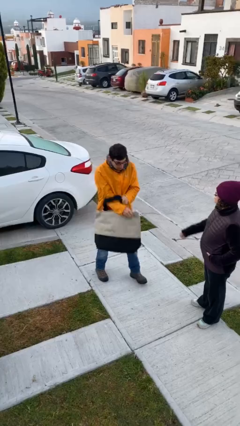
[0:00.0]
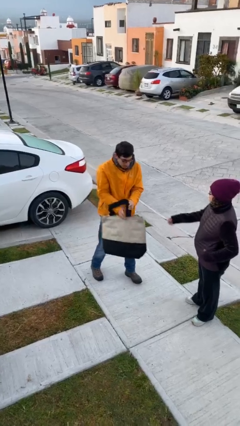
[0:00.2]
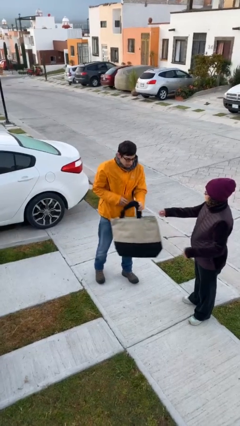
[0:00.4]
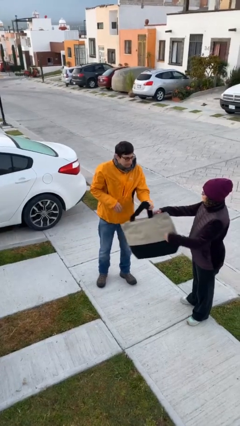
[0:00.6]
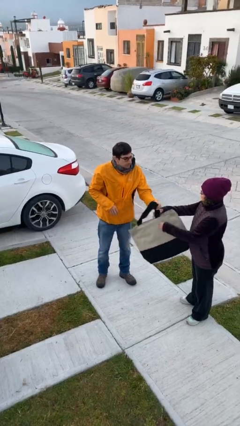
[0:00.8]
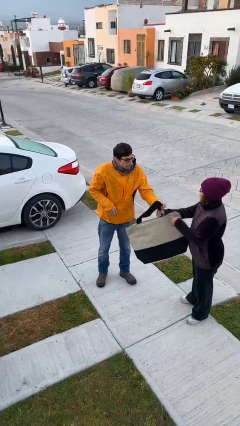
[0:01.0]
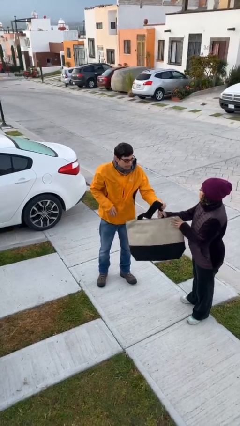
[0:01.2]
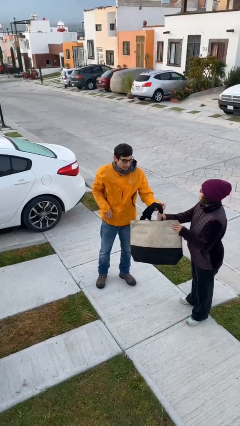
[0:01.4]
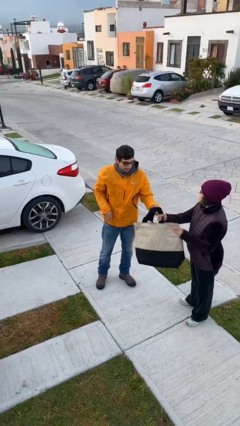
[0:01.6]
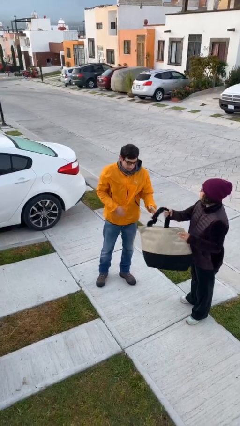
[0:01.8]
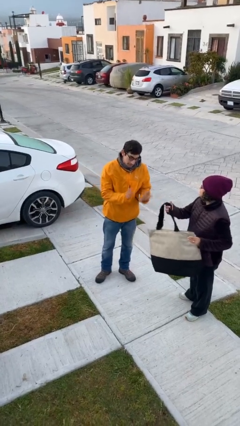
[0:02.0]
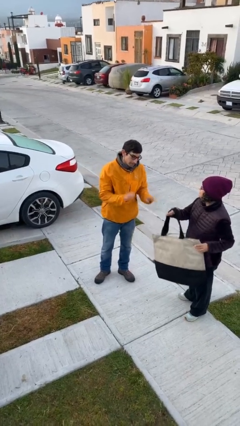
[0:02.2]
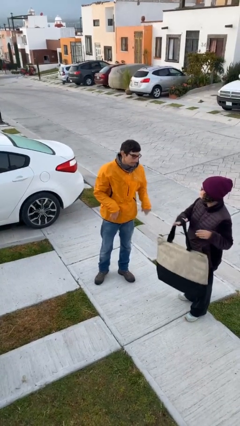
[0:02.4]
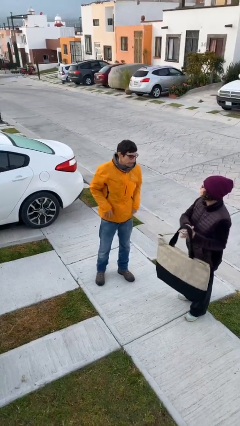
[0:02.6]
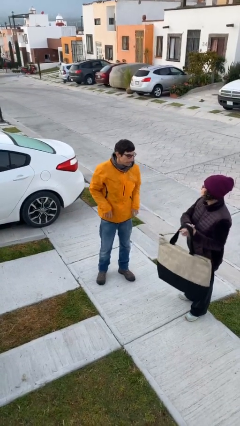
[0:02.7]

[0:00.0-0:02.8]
person transfers object to person

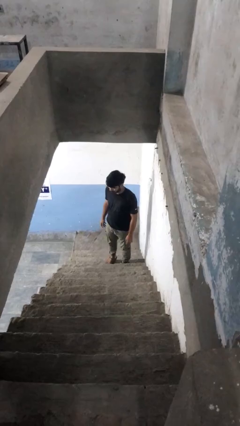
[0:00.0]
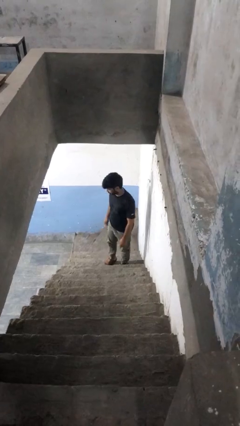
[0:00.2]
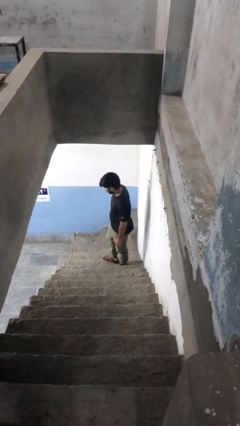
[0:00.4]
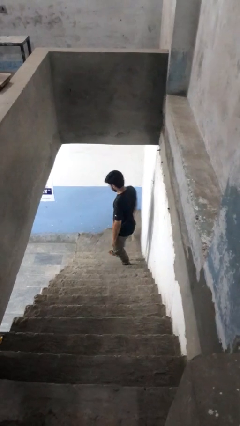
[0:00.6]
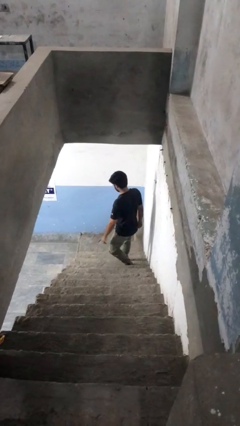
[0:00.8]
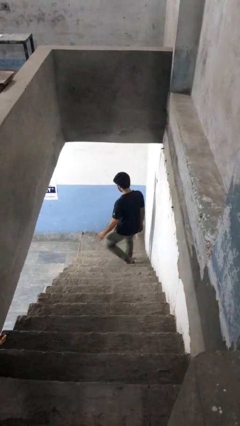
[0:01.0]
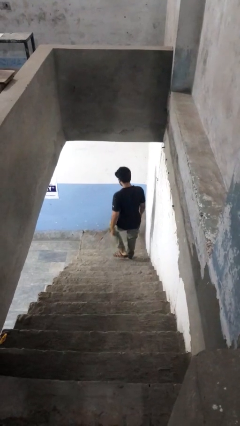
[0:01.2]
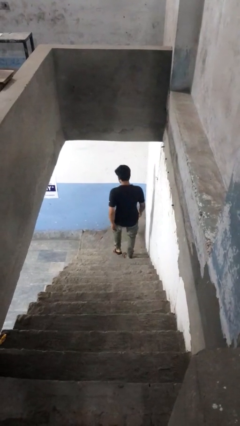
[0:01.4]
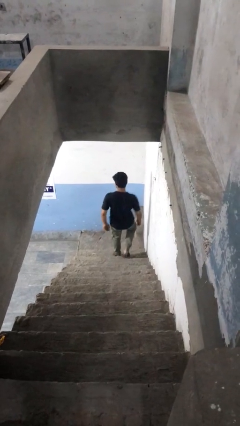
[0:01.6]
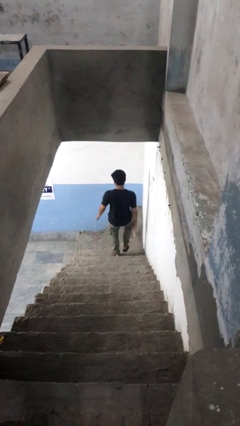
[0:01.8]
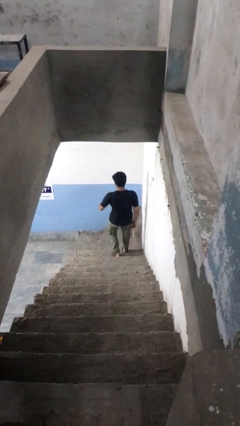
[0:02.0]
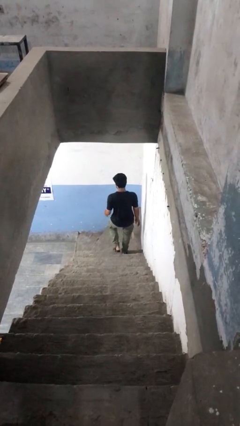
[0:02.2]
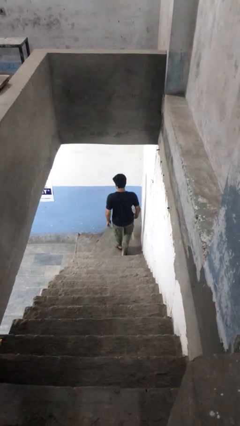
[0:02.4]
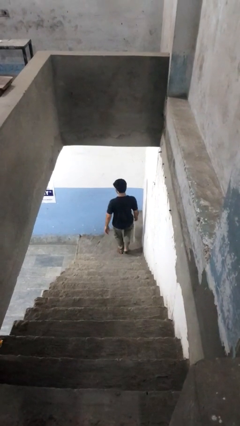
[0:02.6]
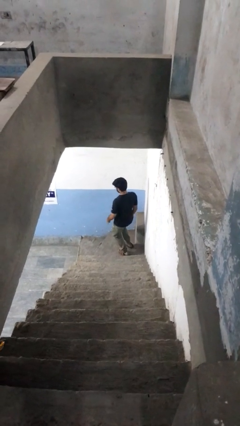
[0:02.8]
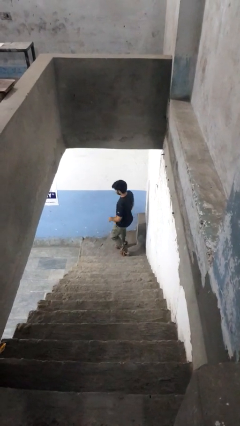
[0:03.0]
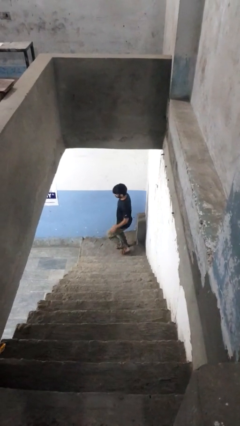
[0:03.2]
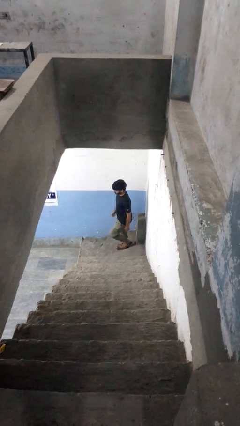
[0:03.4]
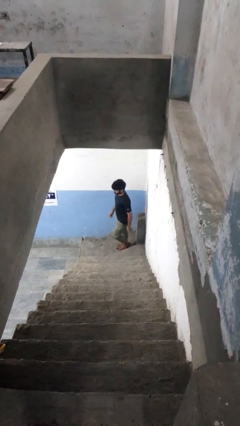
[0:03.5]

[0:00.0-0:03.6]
person climbs down stairs

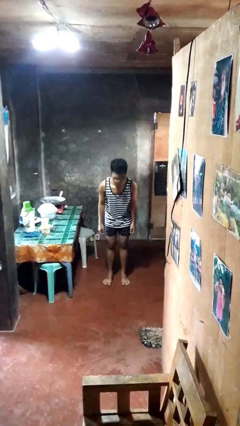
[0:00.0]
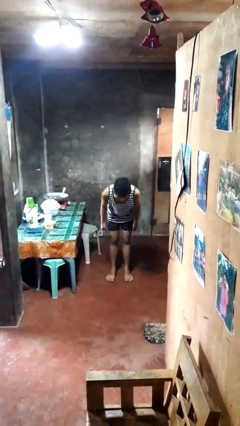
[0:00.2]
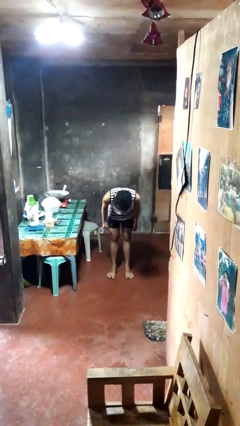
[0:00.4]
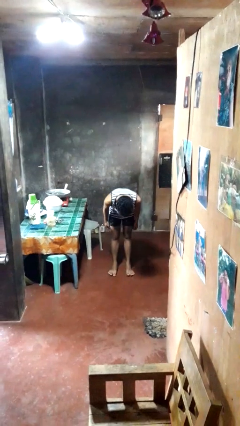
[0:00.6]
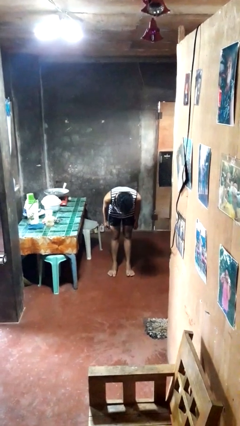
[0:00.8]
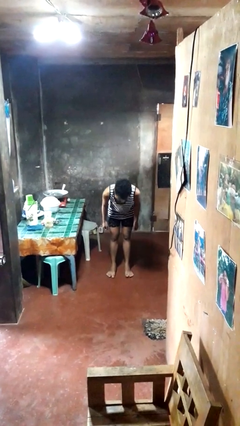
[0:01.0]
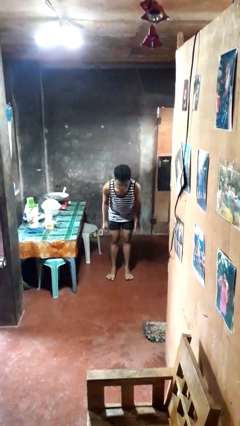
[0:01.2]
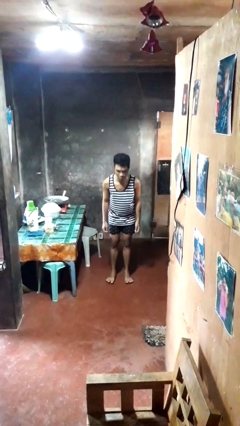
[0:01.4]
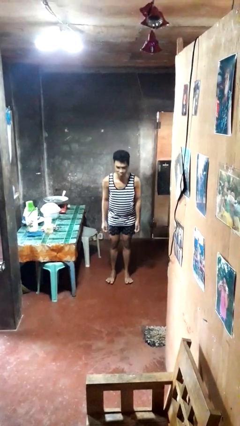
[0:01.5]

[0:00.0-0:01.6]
person bows

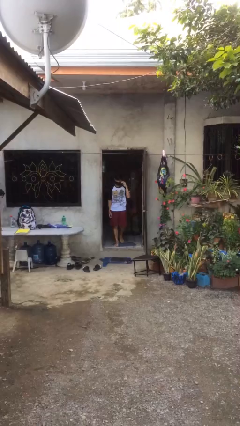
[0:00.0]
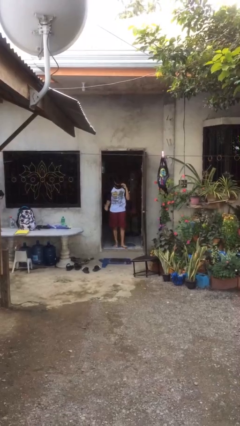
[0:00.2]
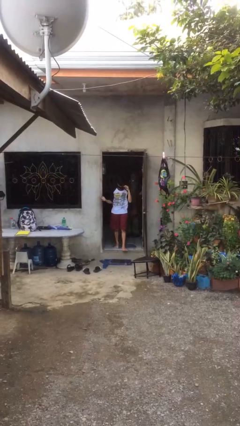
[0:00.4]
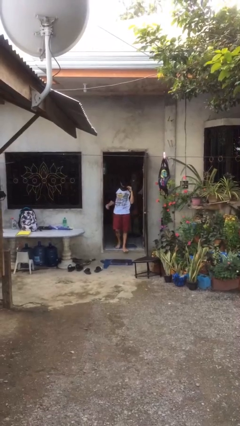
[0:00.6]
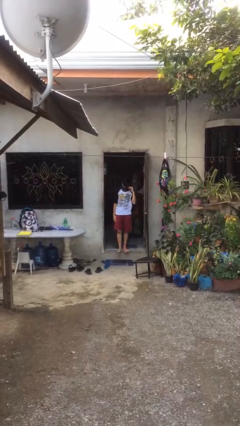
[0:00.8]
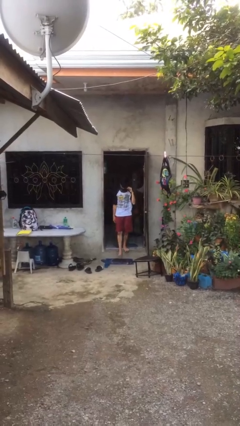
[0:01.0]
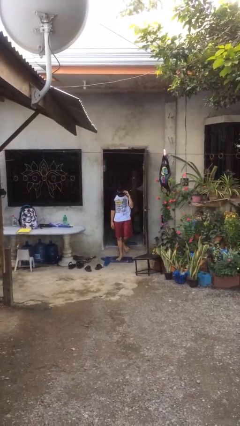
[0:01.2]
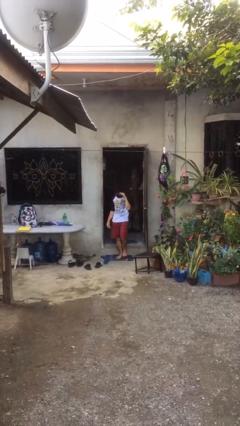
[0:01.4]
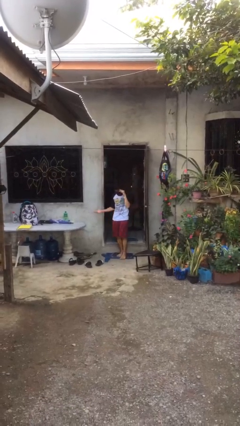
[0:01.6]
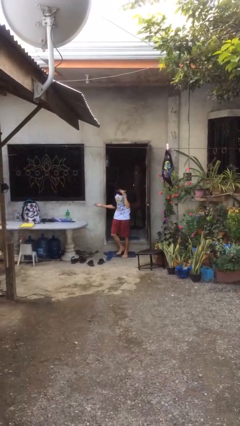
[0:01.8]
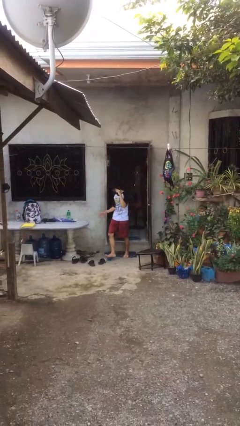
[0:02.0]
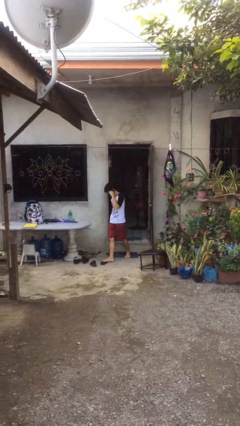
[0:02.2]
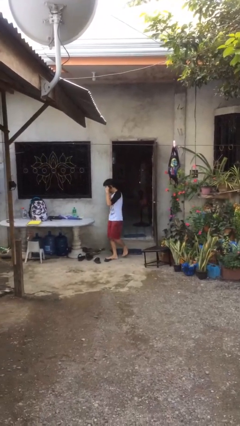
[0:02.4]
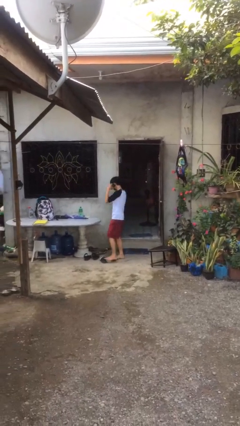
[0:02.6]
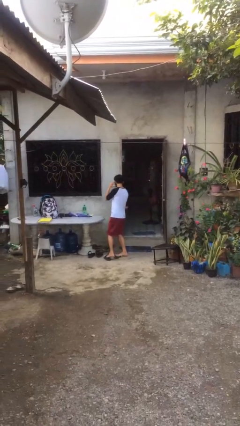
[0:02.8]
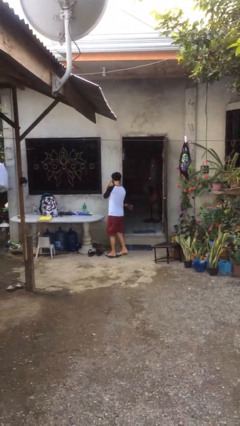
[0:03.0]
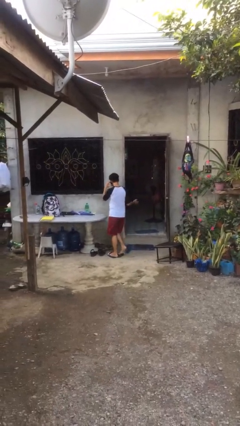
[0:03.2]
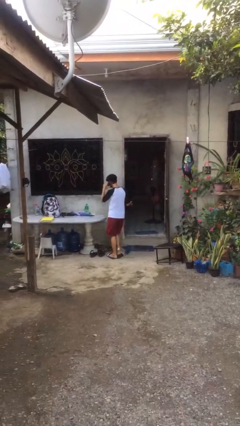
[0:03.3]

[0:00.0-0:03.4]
person enters scene through structure

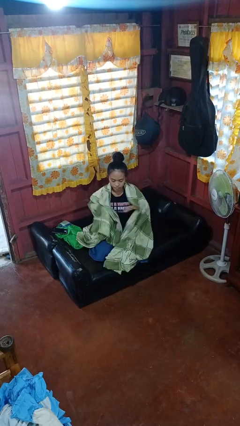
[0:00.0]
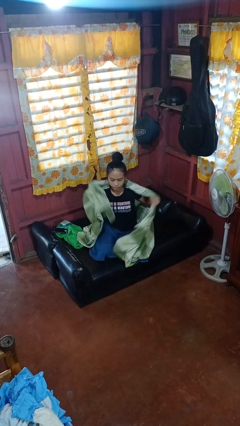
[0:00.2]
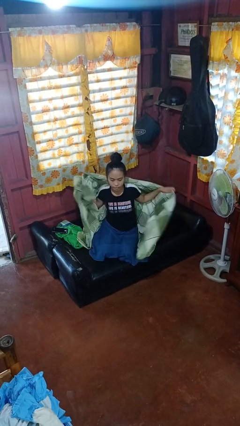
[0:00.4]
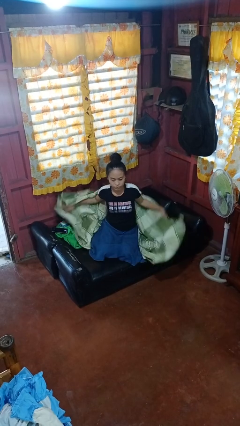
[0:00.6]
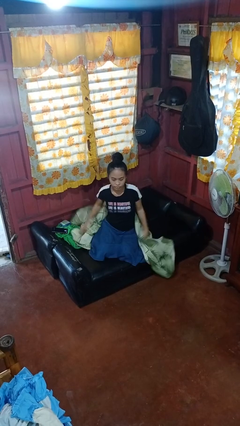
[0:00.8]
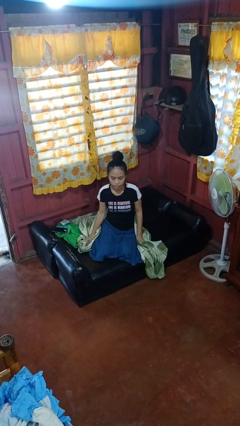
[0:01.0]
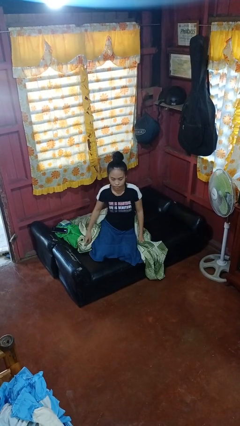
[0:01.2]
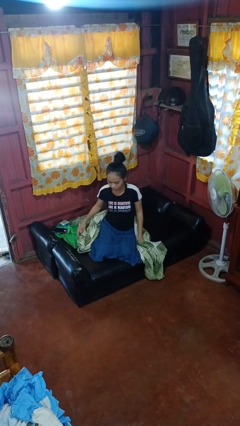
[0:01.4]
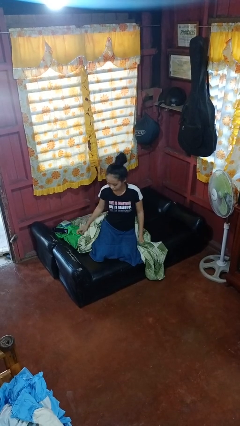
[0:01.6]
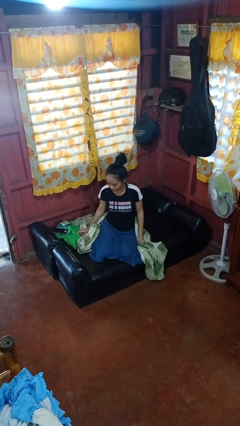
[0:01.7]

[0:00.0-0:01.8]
person uncovers with blanket

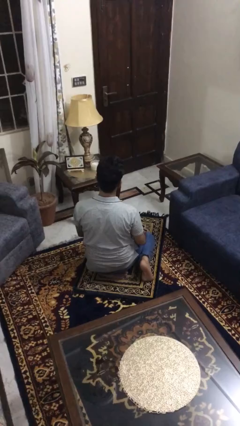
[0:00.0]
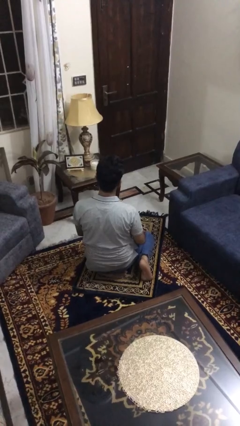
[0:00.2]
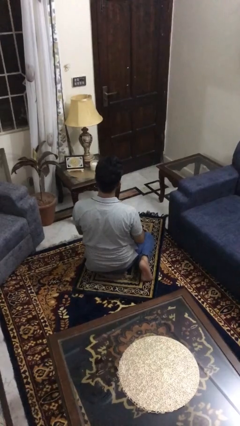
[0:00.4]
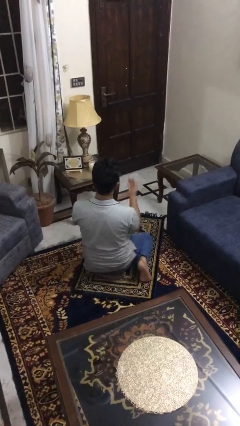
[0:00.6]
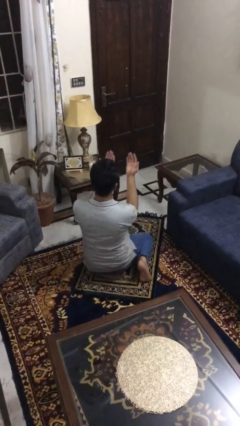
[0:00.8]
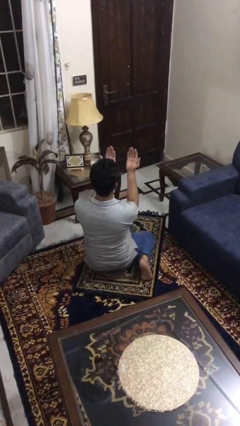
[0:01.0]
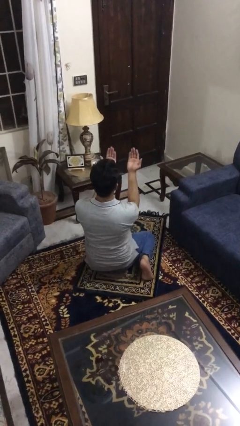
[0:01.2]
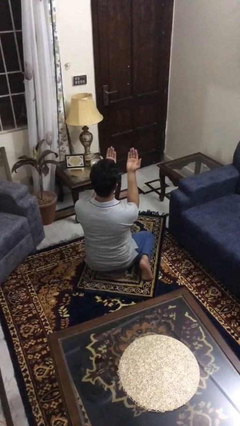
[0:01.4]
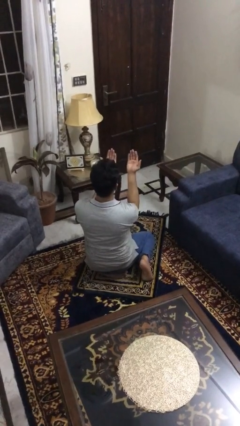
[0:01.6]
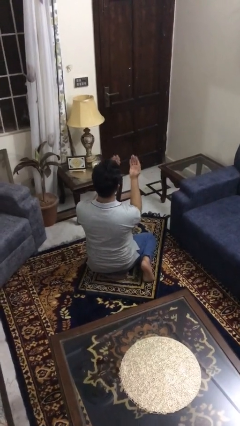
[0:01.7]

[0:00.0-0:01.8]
person prays

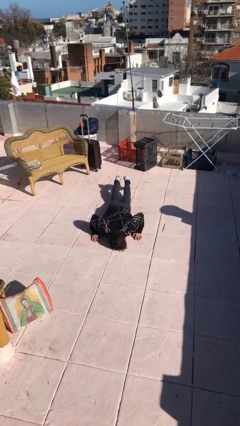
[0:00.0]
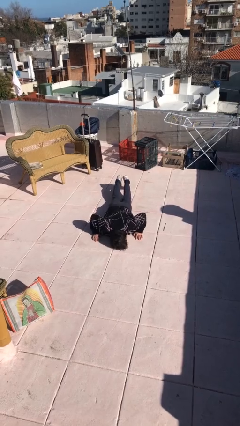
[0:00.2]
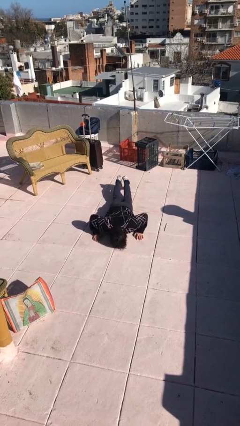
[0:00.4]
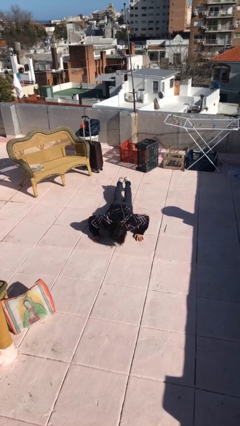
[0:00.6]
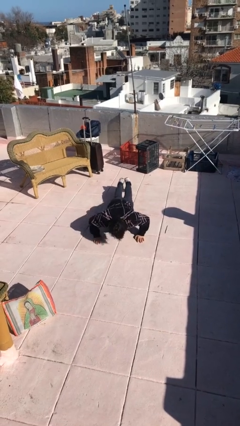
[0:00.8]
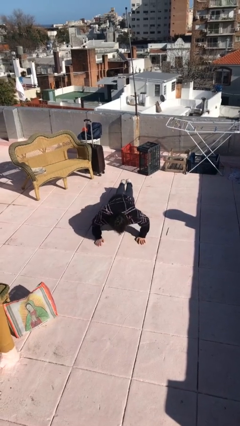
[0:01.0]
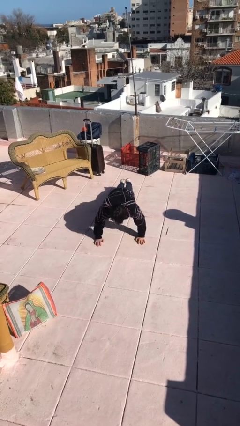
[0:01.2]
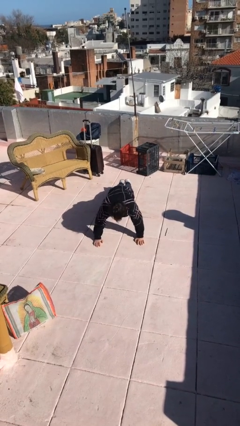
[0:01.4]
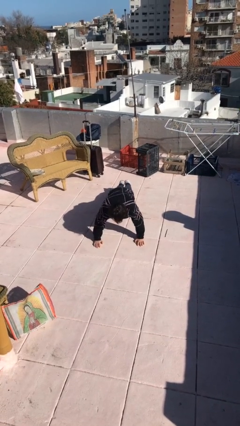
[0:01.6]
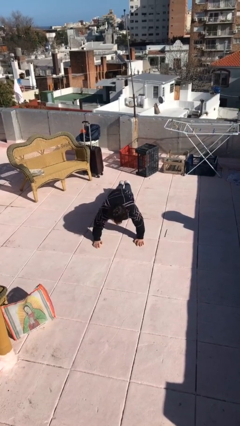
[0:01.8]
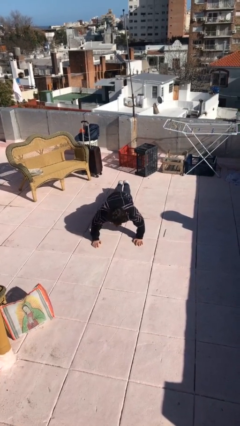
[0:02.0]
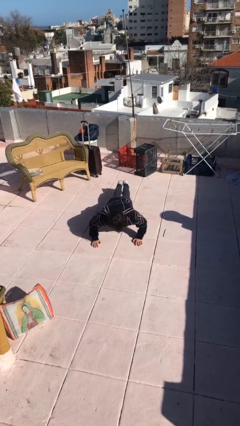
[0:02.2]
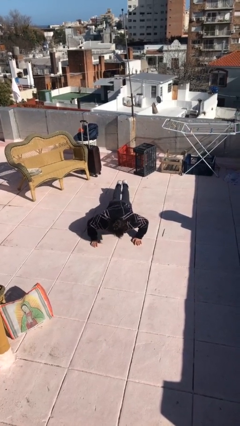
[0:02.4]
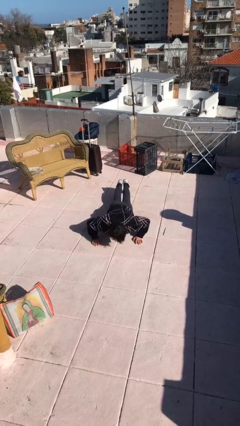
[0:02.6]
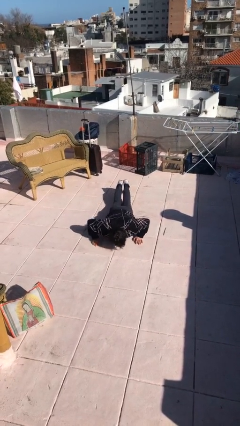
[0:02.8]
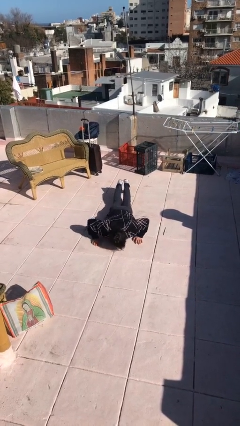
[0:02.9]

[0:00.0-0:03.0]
person exercises with pushup
